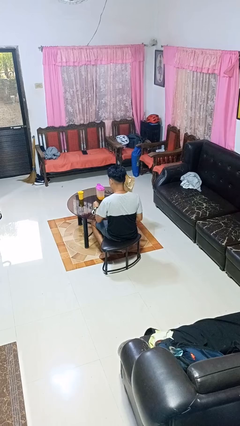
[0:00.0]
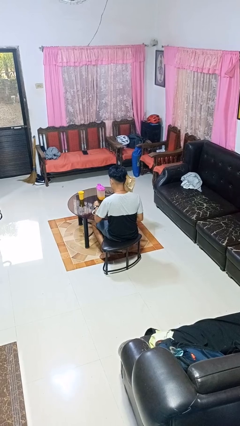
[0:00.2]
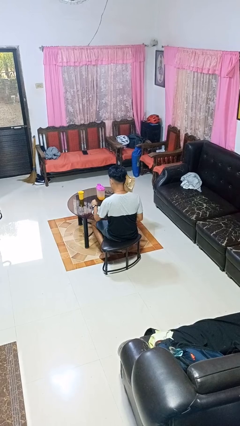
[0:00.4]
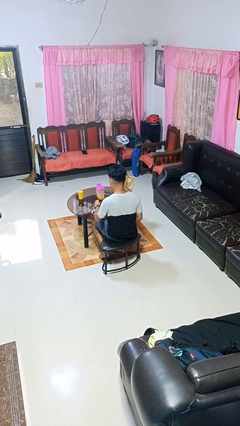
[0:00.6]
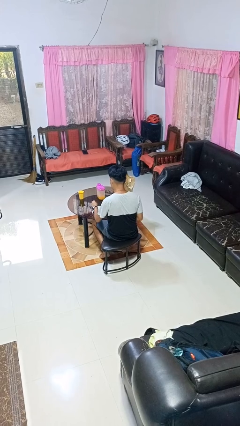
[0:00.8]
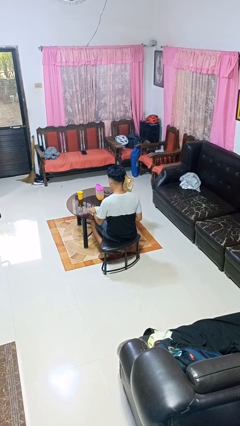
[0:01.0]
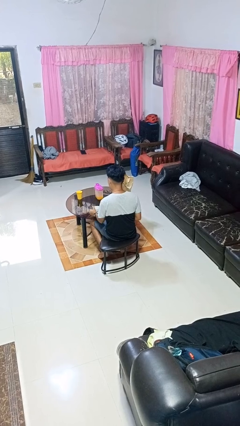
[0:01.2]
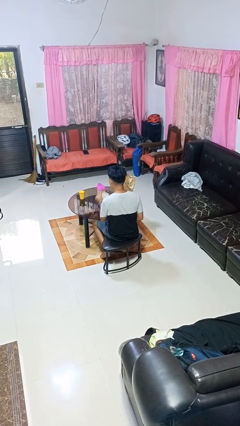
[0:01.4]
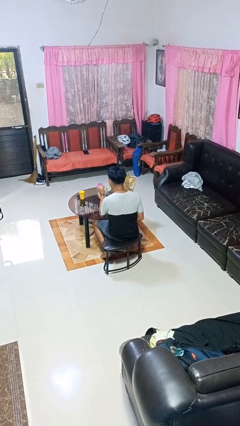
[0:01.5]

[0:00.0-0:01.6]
person stirs mug

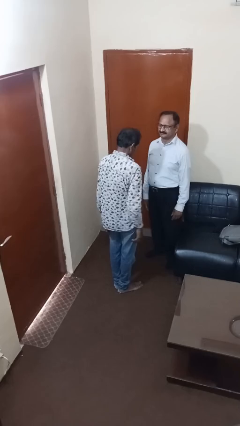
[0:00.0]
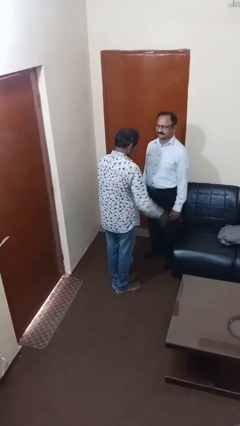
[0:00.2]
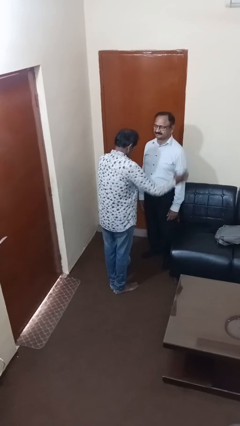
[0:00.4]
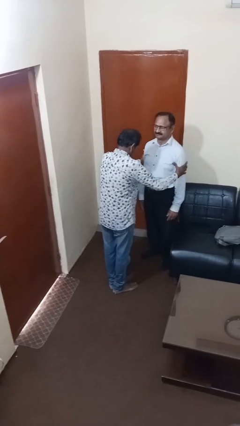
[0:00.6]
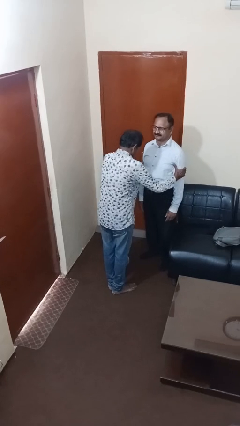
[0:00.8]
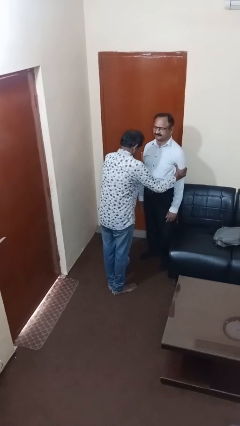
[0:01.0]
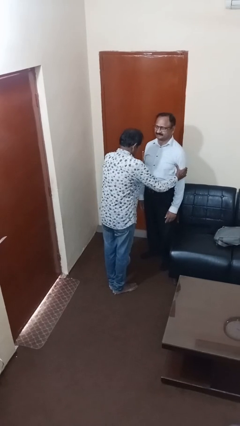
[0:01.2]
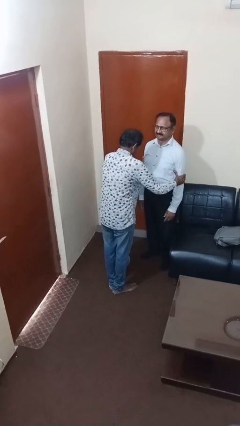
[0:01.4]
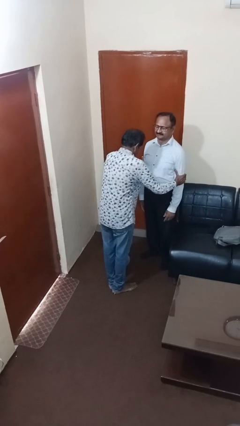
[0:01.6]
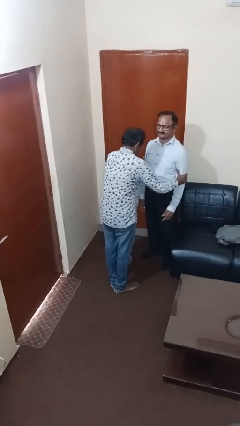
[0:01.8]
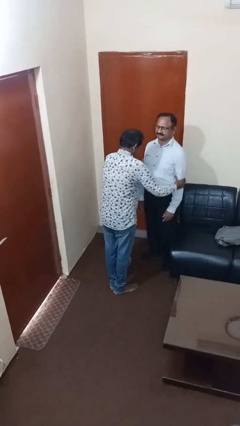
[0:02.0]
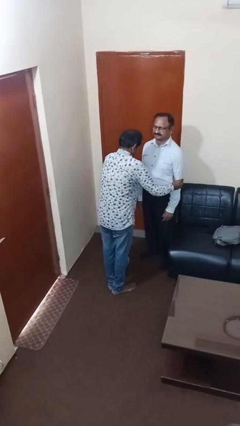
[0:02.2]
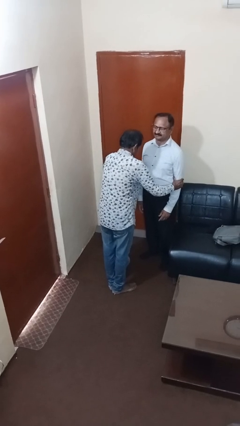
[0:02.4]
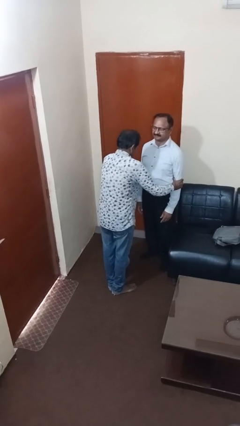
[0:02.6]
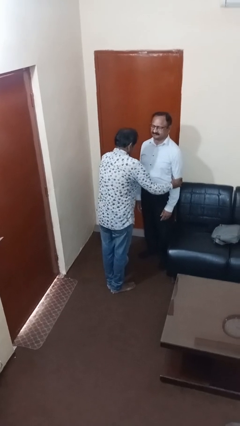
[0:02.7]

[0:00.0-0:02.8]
person grabs person by bicep

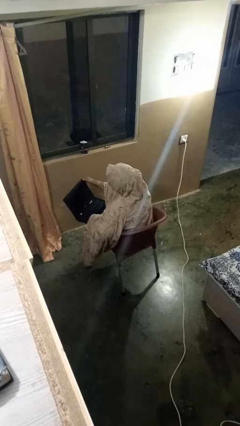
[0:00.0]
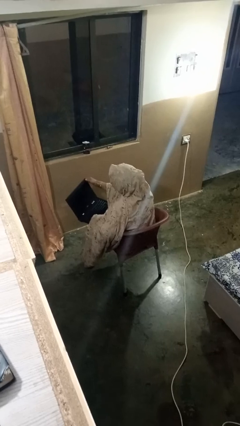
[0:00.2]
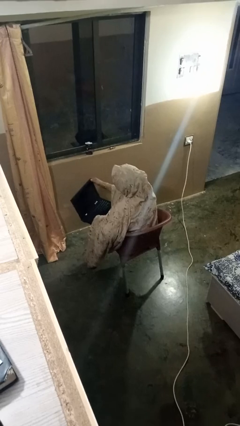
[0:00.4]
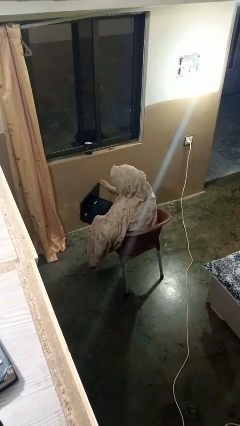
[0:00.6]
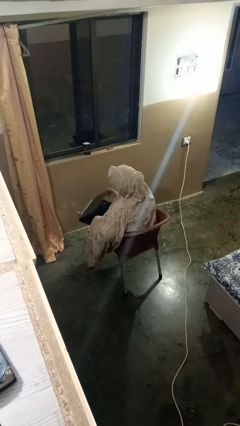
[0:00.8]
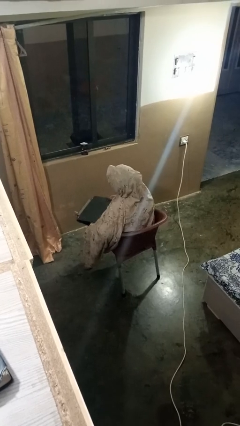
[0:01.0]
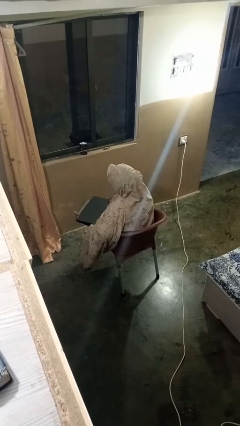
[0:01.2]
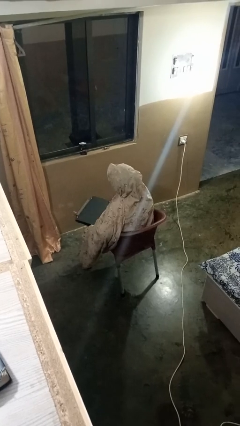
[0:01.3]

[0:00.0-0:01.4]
person closes laptop

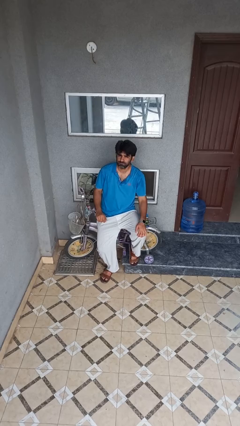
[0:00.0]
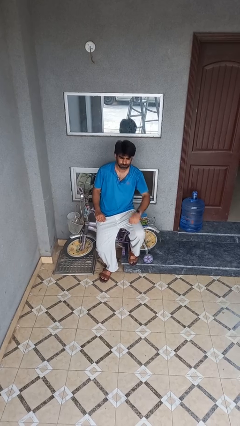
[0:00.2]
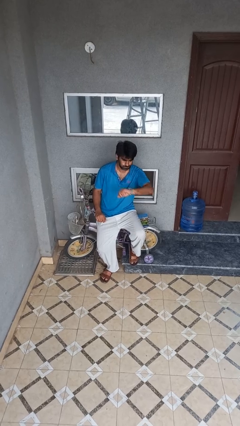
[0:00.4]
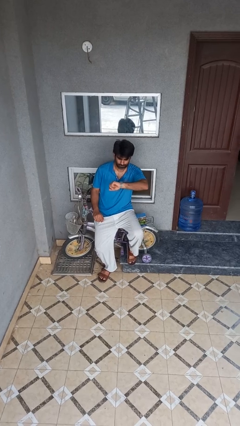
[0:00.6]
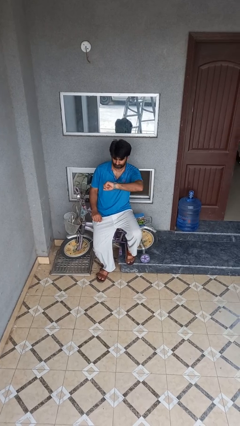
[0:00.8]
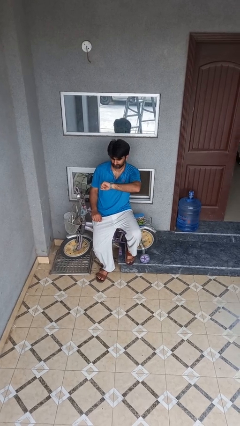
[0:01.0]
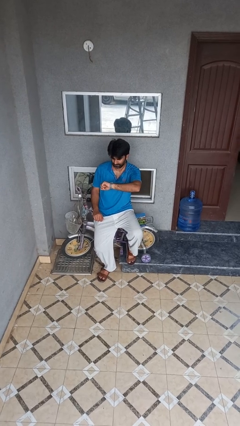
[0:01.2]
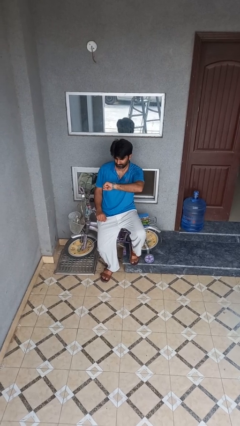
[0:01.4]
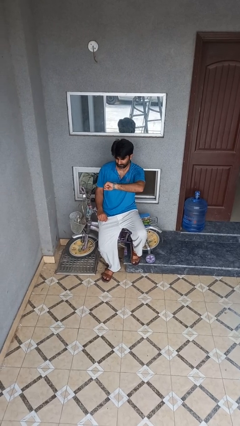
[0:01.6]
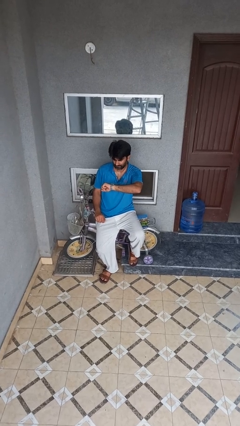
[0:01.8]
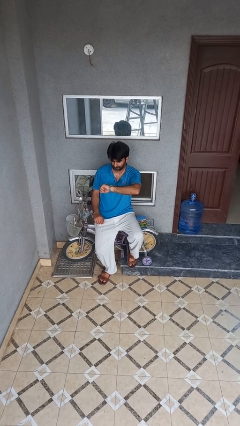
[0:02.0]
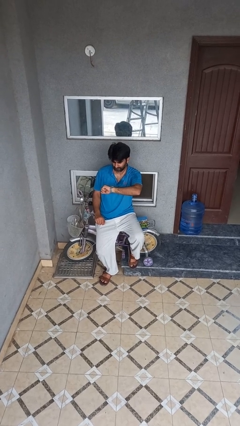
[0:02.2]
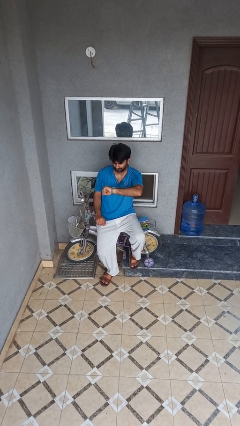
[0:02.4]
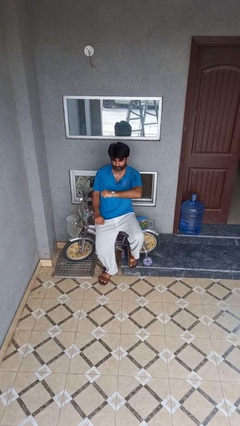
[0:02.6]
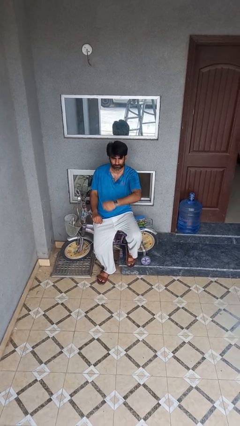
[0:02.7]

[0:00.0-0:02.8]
person looks at wristwatch

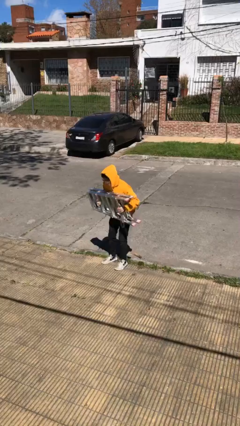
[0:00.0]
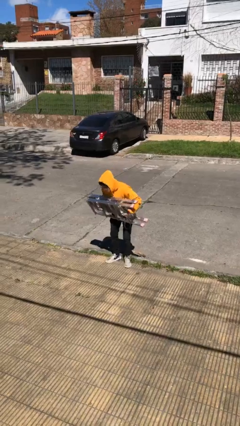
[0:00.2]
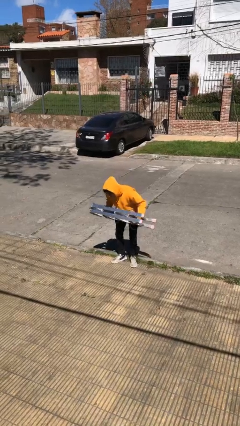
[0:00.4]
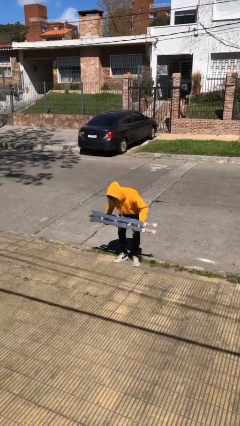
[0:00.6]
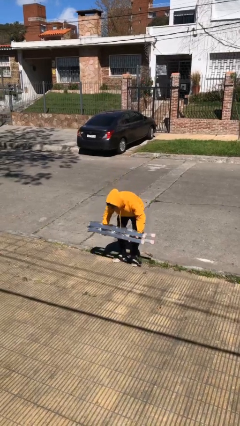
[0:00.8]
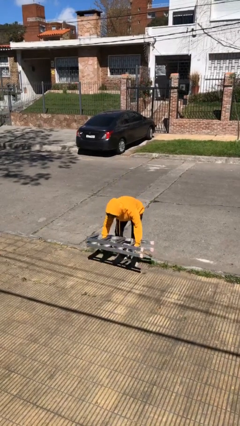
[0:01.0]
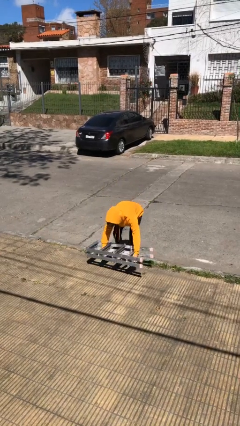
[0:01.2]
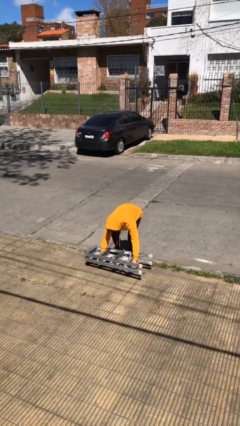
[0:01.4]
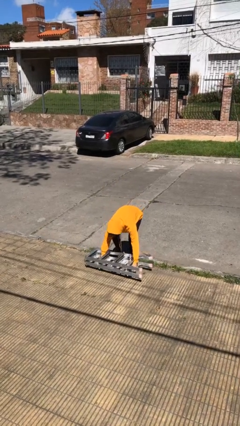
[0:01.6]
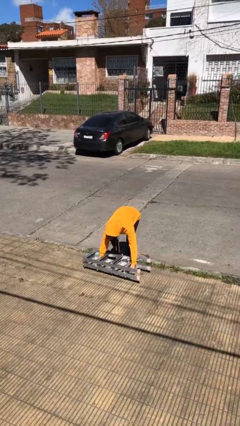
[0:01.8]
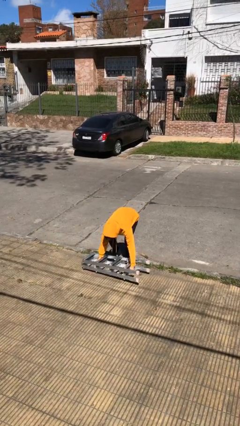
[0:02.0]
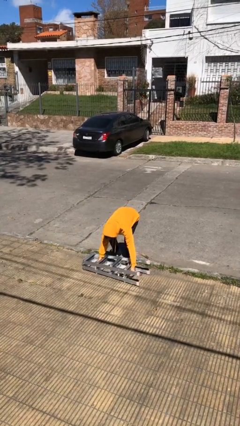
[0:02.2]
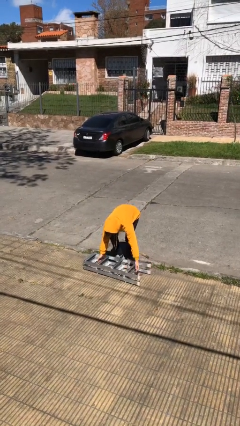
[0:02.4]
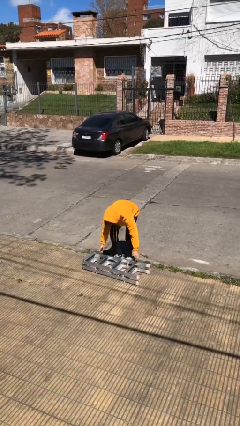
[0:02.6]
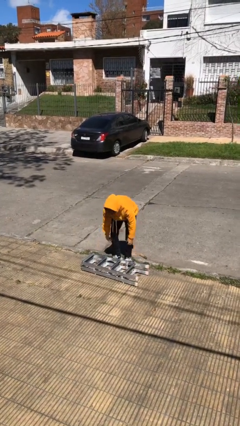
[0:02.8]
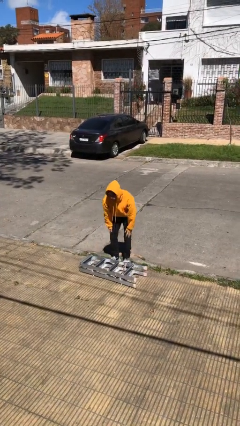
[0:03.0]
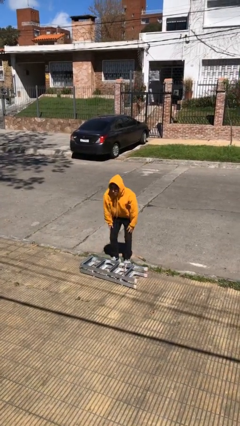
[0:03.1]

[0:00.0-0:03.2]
person puts down object on floor

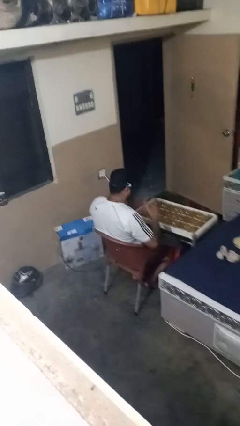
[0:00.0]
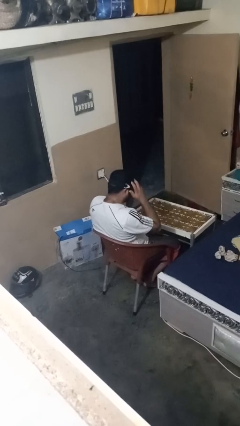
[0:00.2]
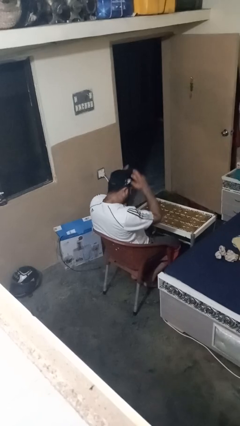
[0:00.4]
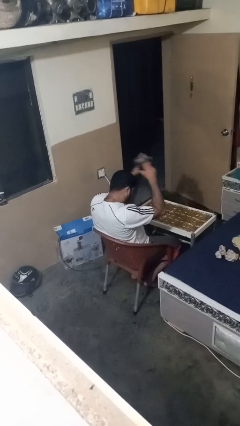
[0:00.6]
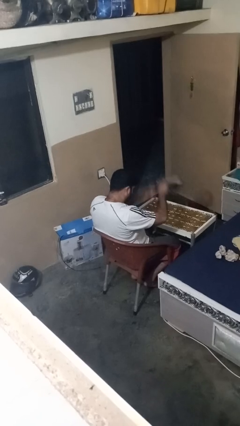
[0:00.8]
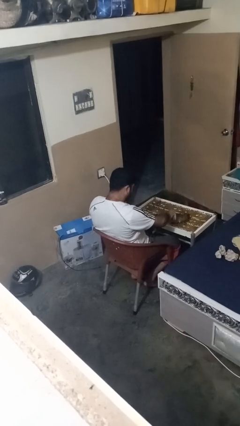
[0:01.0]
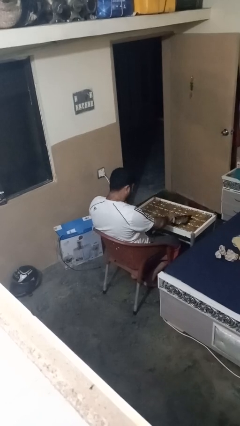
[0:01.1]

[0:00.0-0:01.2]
person takes off sunglasses

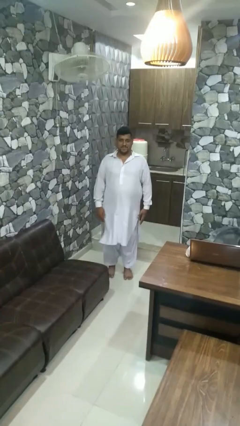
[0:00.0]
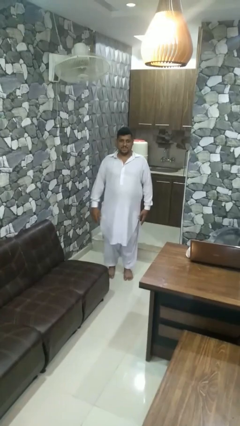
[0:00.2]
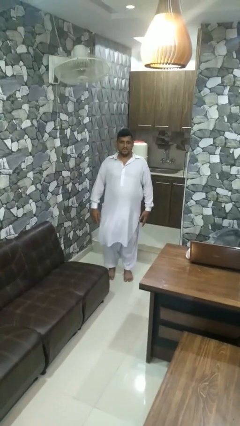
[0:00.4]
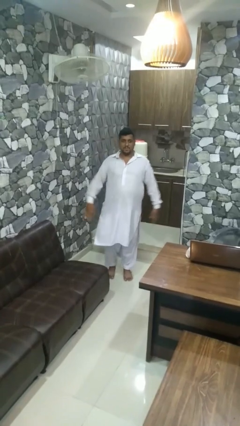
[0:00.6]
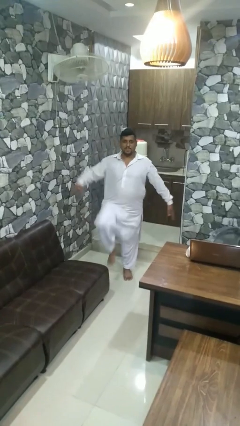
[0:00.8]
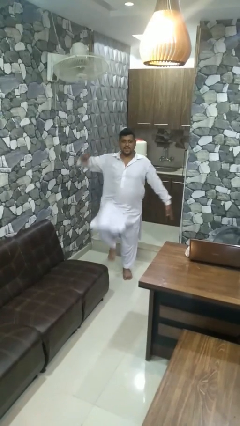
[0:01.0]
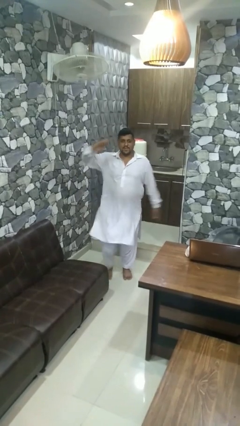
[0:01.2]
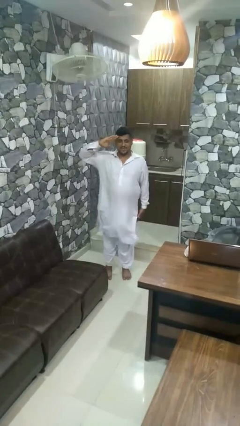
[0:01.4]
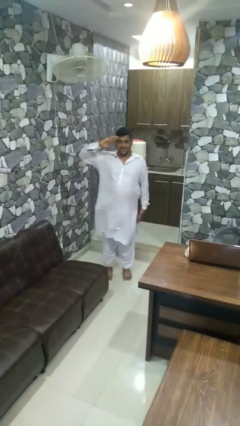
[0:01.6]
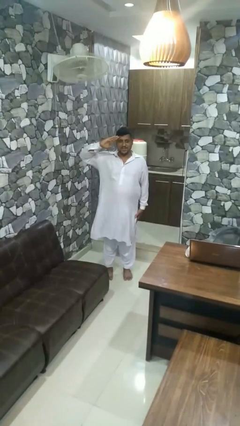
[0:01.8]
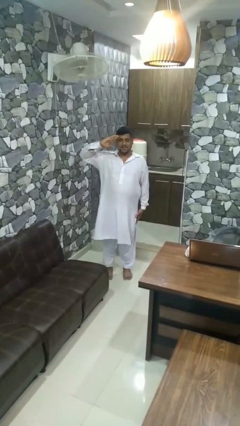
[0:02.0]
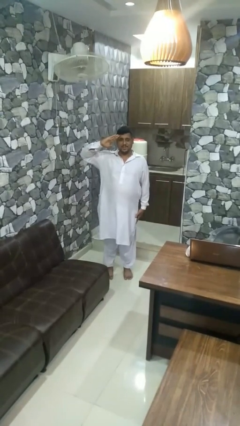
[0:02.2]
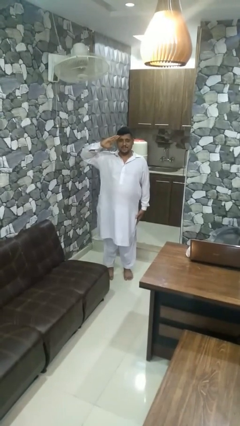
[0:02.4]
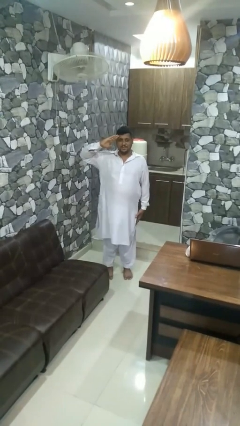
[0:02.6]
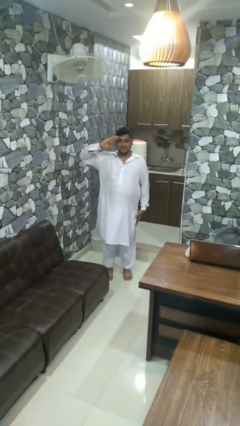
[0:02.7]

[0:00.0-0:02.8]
person salutes

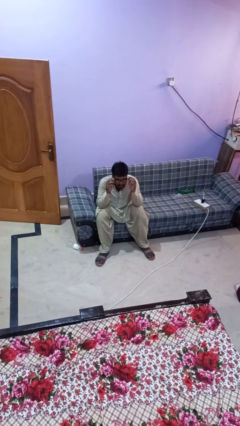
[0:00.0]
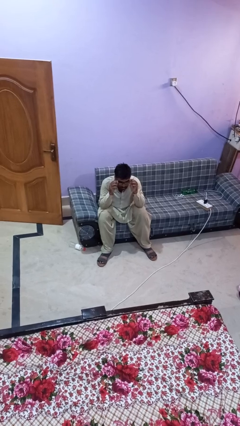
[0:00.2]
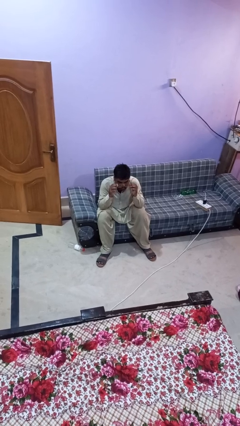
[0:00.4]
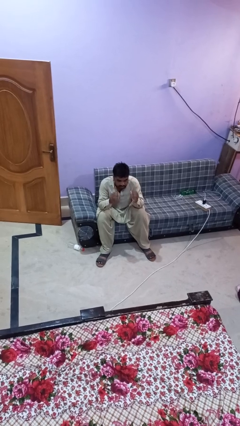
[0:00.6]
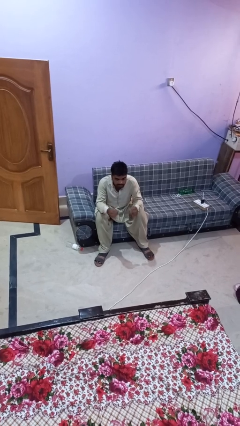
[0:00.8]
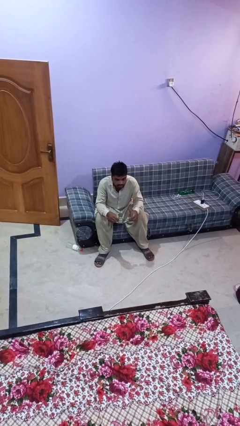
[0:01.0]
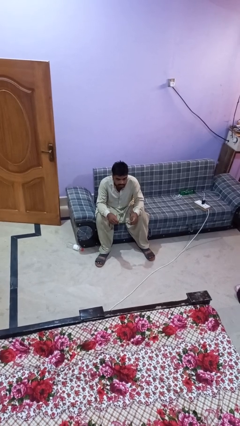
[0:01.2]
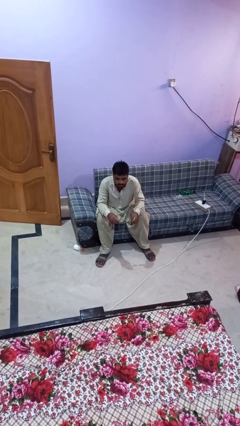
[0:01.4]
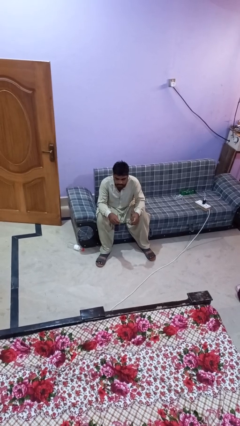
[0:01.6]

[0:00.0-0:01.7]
person takes off glasses
